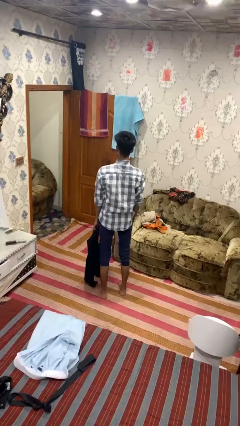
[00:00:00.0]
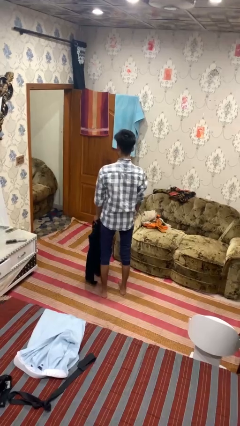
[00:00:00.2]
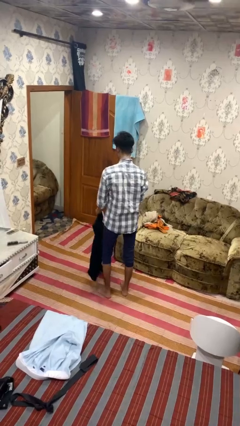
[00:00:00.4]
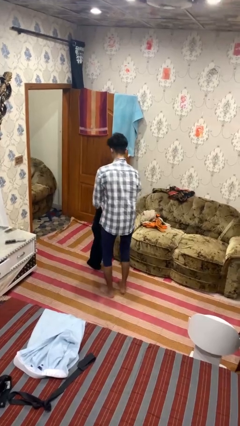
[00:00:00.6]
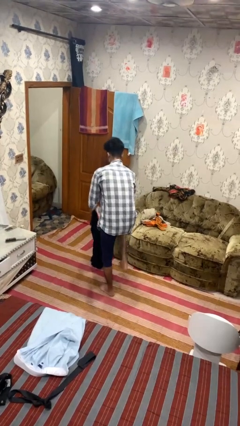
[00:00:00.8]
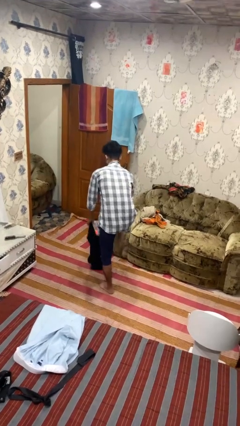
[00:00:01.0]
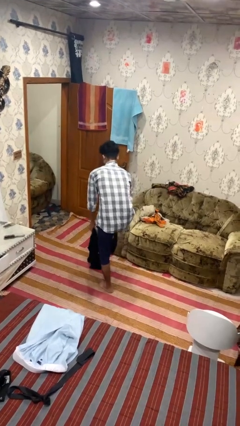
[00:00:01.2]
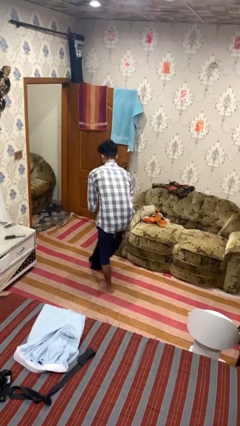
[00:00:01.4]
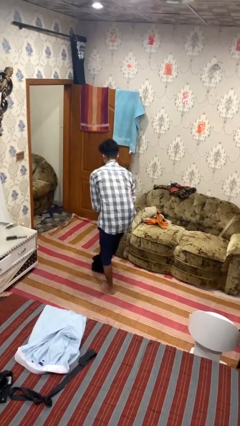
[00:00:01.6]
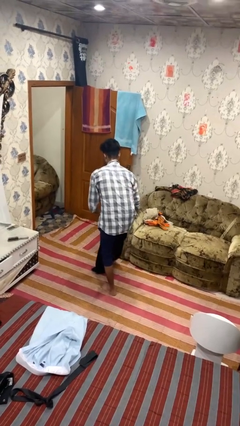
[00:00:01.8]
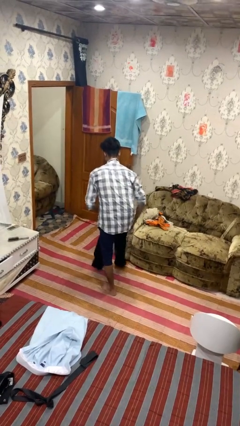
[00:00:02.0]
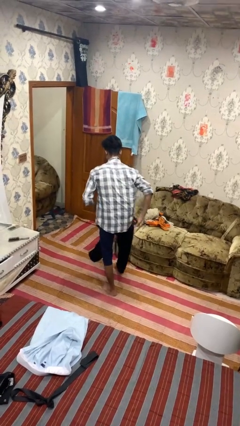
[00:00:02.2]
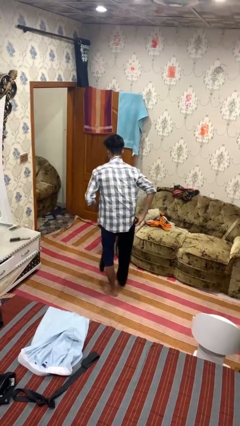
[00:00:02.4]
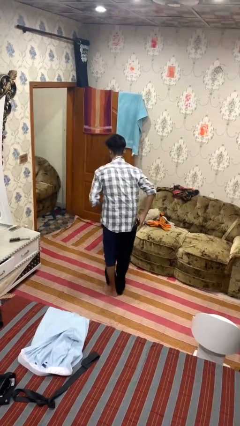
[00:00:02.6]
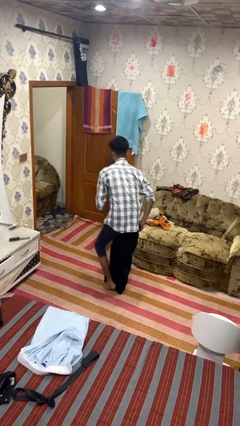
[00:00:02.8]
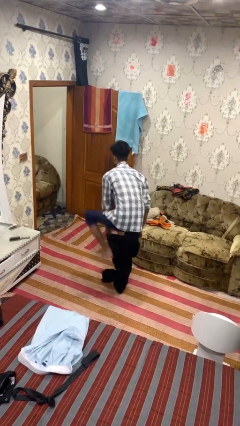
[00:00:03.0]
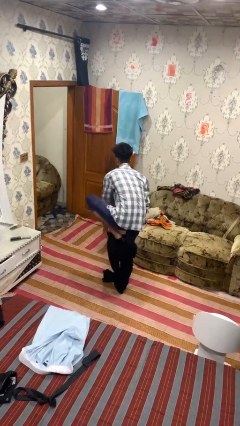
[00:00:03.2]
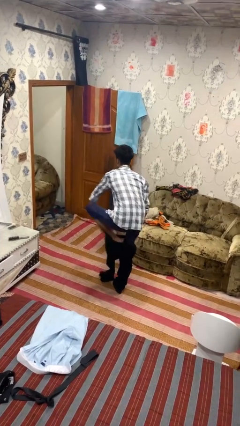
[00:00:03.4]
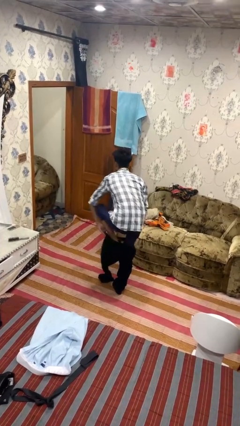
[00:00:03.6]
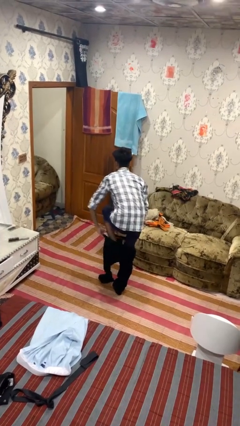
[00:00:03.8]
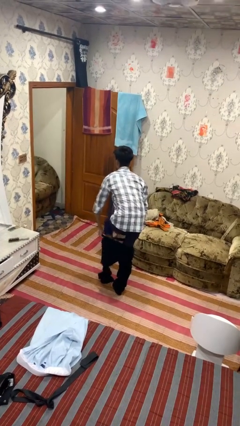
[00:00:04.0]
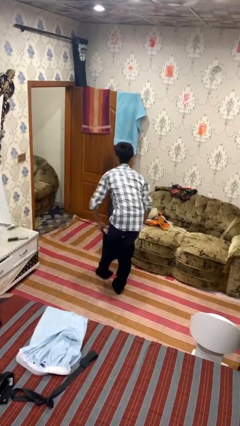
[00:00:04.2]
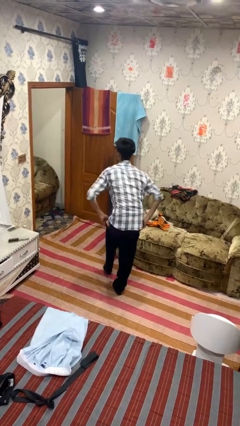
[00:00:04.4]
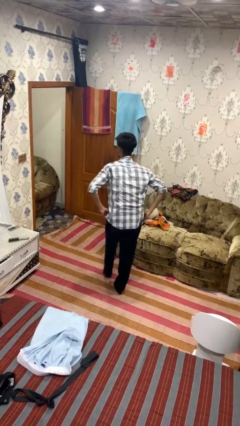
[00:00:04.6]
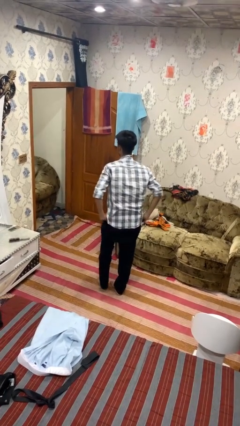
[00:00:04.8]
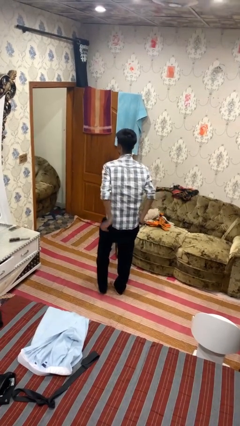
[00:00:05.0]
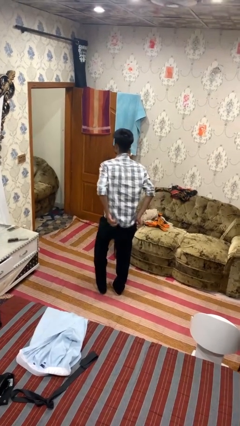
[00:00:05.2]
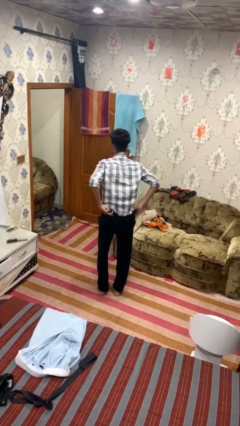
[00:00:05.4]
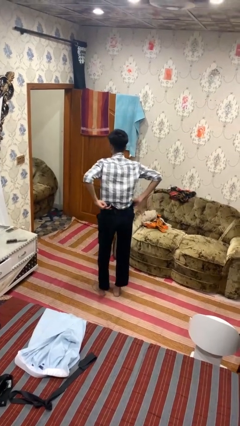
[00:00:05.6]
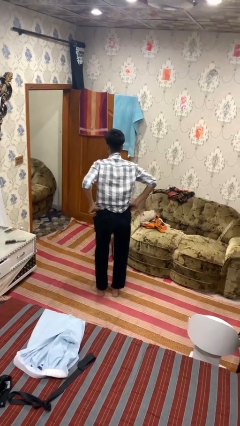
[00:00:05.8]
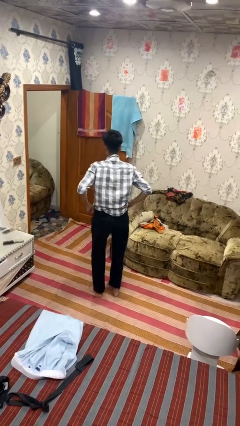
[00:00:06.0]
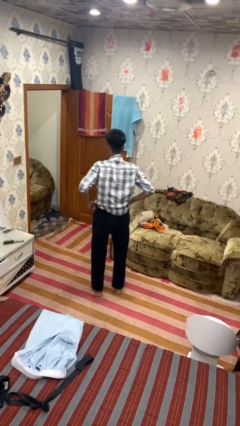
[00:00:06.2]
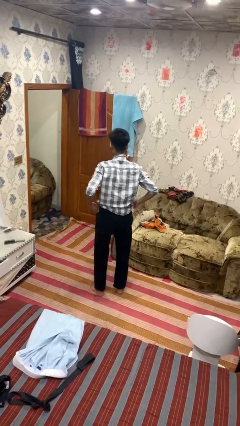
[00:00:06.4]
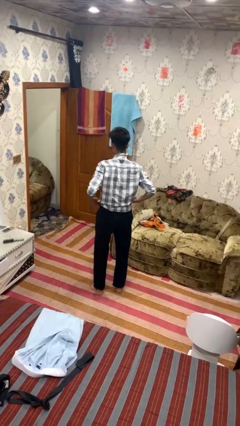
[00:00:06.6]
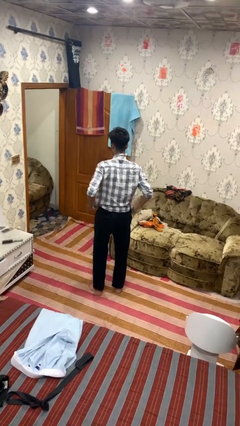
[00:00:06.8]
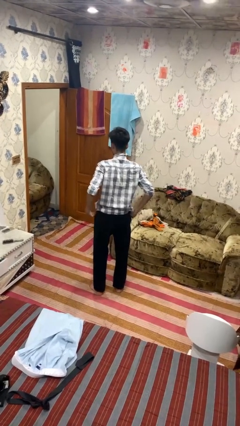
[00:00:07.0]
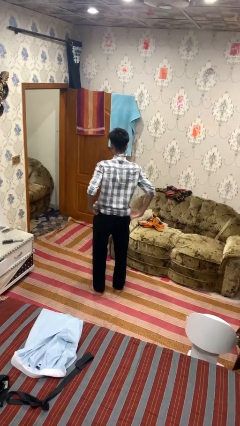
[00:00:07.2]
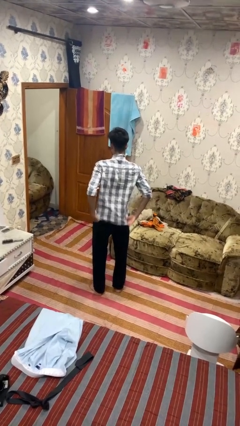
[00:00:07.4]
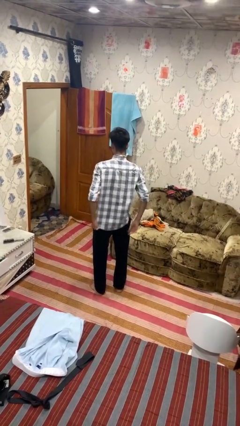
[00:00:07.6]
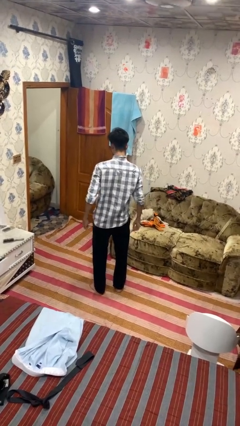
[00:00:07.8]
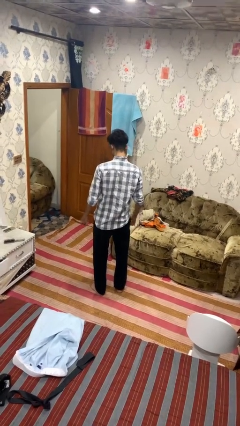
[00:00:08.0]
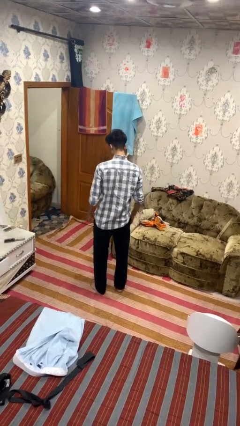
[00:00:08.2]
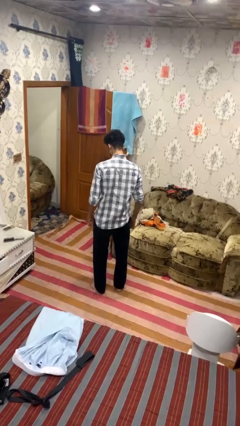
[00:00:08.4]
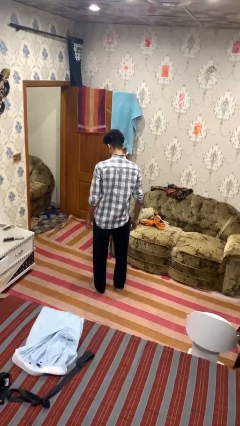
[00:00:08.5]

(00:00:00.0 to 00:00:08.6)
person puts on pants

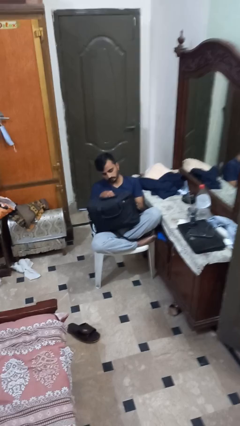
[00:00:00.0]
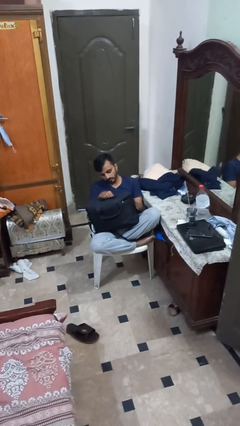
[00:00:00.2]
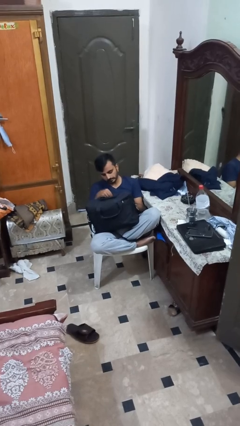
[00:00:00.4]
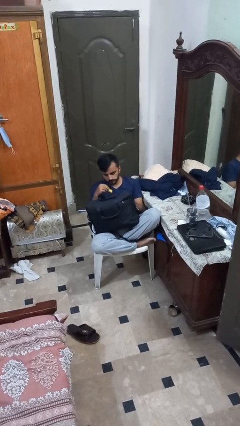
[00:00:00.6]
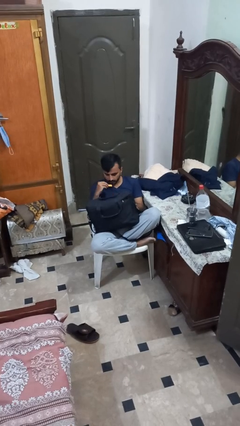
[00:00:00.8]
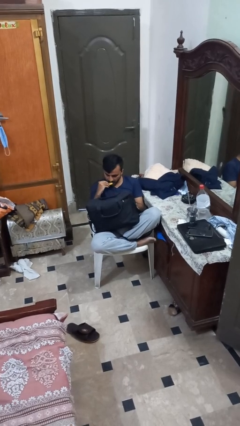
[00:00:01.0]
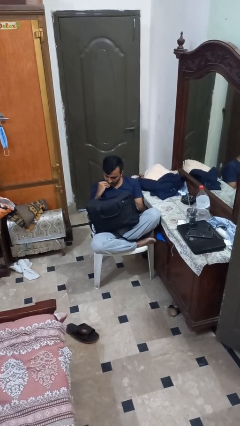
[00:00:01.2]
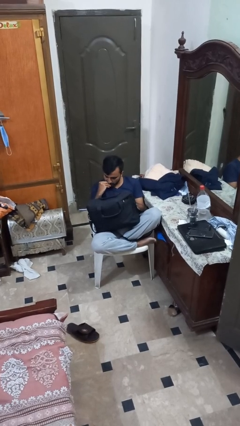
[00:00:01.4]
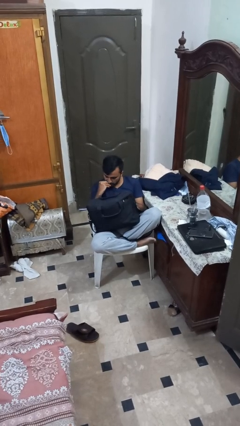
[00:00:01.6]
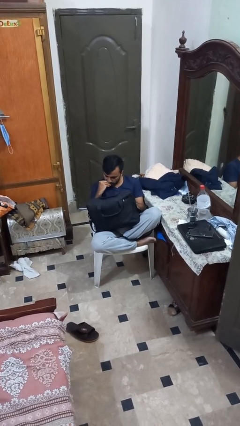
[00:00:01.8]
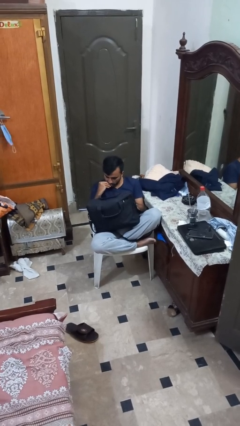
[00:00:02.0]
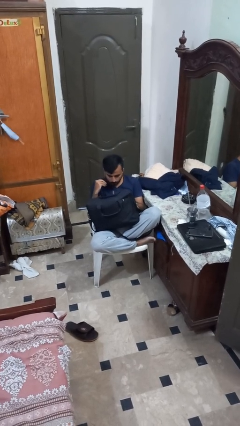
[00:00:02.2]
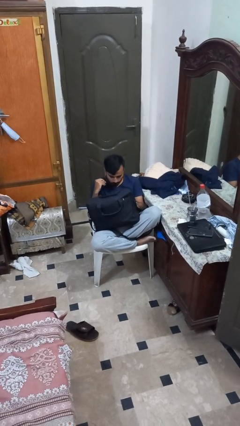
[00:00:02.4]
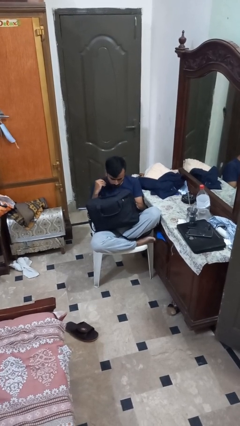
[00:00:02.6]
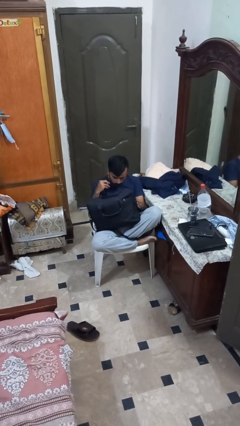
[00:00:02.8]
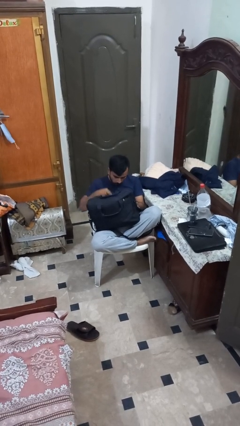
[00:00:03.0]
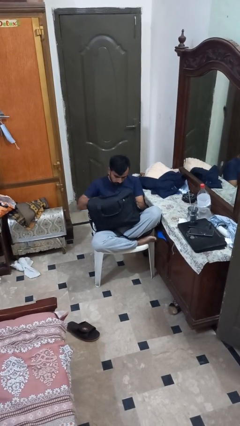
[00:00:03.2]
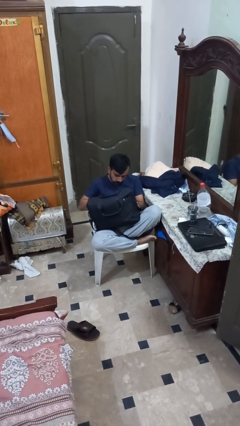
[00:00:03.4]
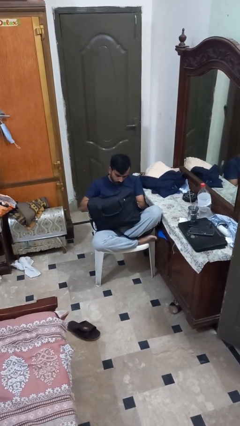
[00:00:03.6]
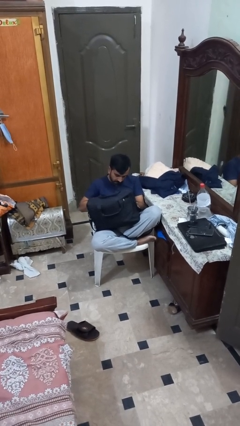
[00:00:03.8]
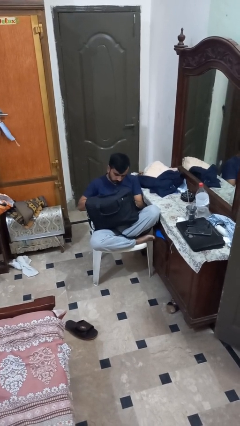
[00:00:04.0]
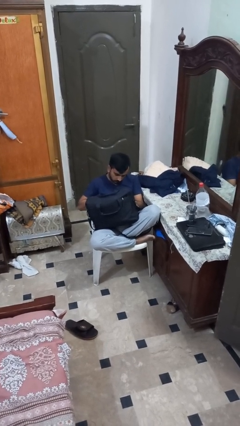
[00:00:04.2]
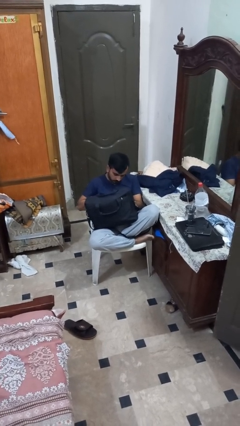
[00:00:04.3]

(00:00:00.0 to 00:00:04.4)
person eats snack from bag

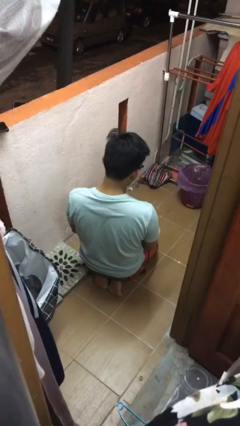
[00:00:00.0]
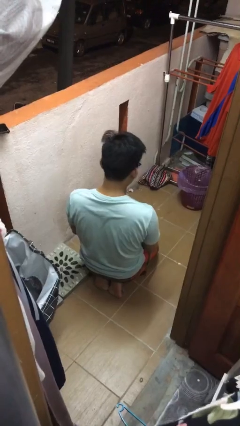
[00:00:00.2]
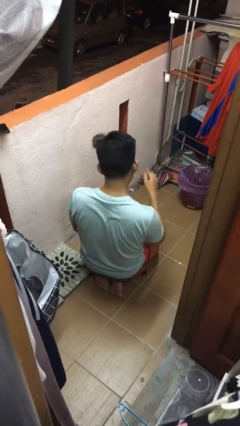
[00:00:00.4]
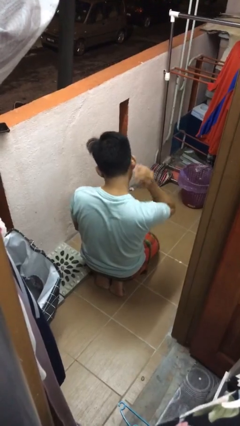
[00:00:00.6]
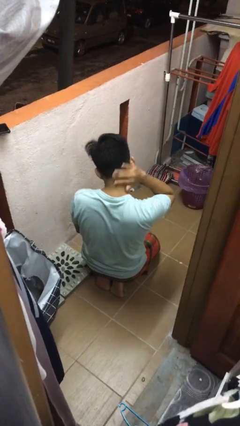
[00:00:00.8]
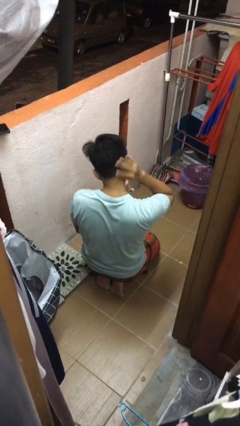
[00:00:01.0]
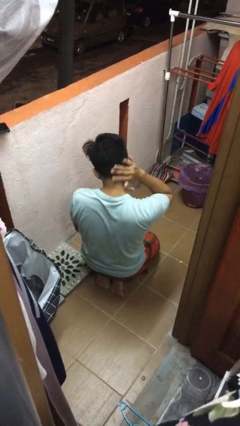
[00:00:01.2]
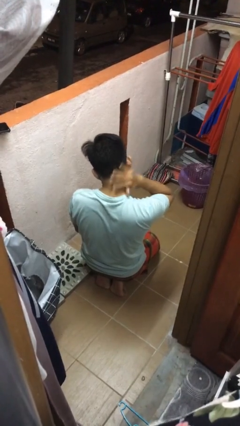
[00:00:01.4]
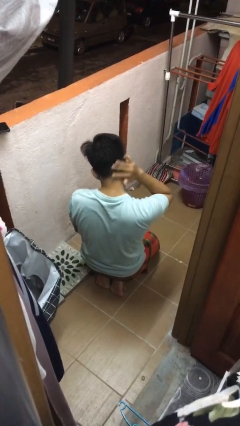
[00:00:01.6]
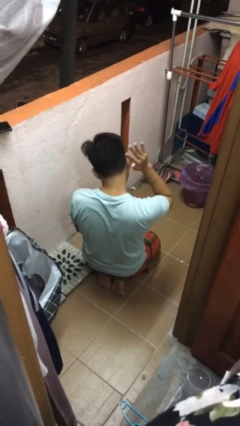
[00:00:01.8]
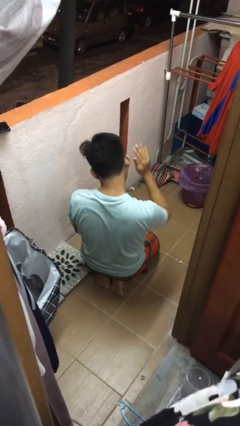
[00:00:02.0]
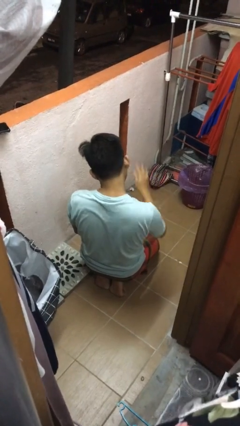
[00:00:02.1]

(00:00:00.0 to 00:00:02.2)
person rubs neck

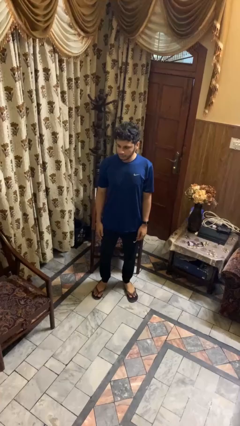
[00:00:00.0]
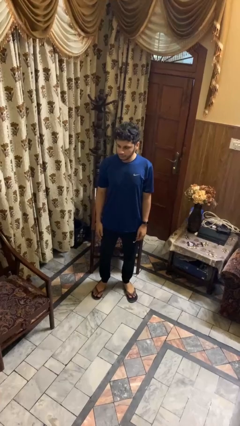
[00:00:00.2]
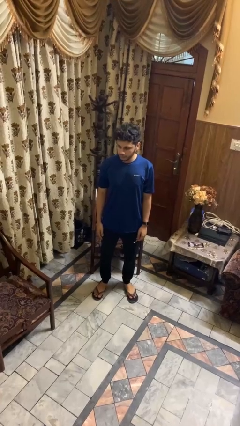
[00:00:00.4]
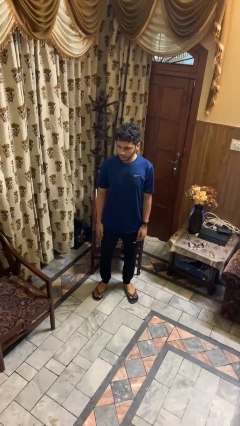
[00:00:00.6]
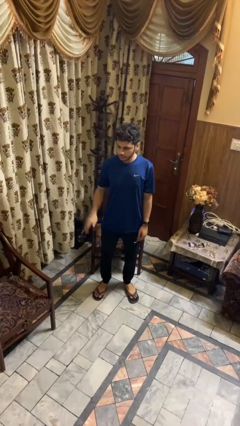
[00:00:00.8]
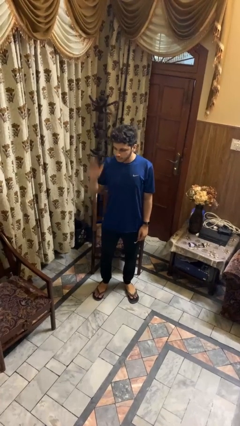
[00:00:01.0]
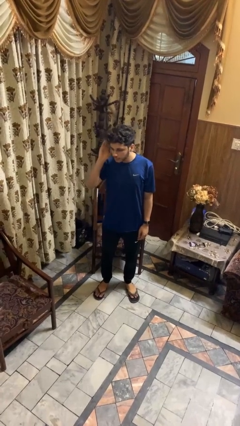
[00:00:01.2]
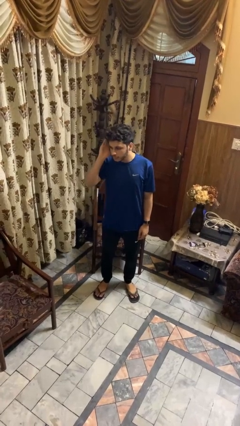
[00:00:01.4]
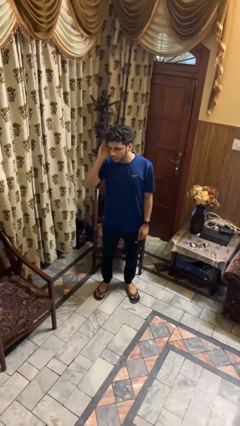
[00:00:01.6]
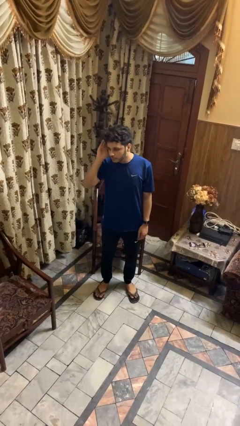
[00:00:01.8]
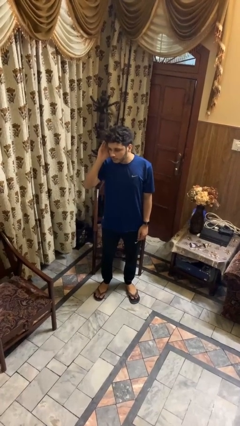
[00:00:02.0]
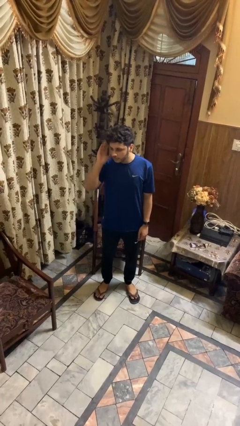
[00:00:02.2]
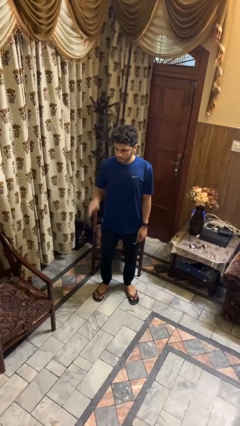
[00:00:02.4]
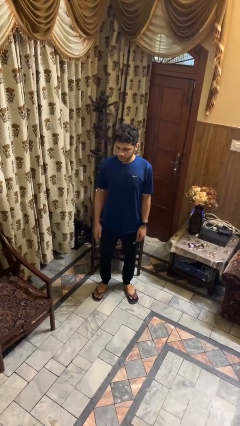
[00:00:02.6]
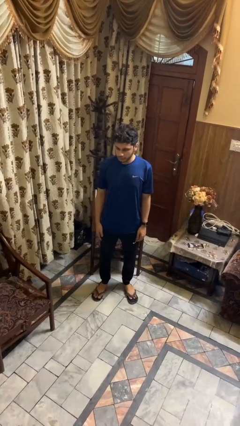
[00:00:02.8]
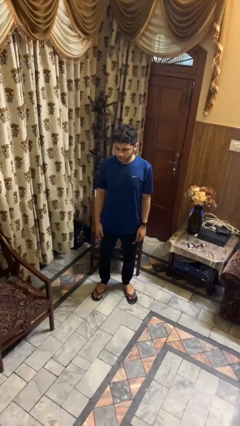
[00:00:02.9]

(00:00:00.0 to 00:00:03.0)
person gestures listen closely
